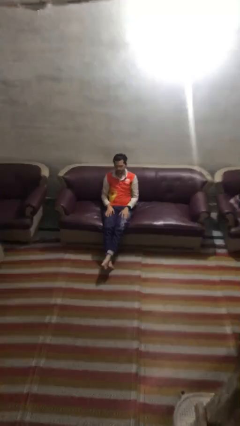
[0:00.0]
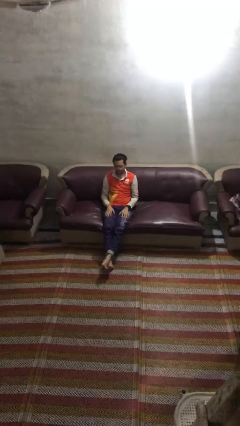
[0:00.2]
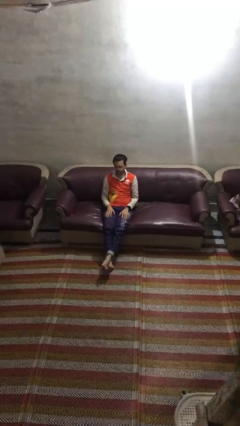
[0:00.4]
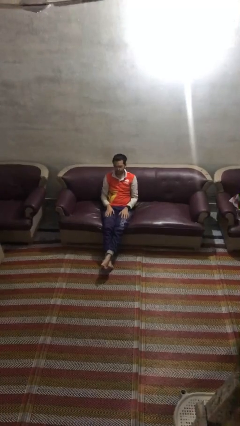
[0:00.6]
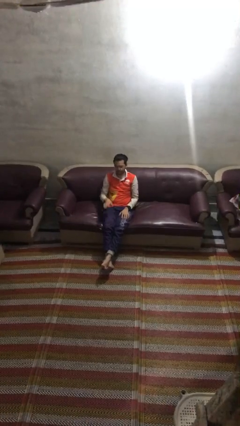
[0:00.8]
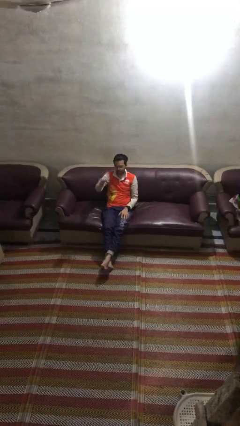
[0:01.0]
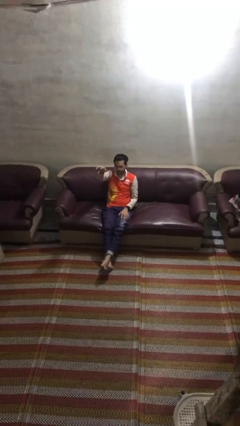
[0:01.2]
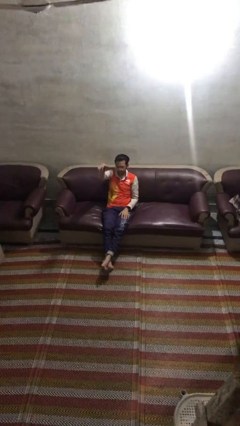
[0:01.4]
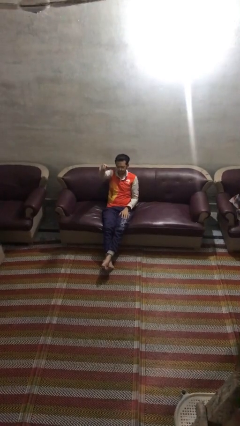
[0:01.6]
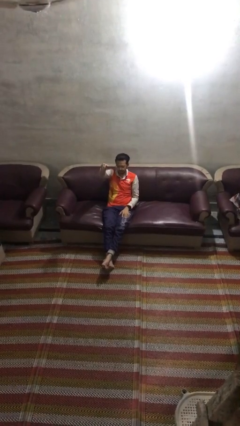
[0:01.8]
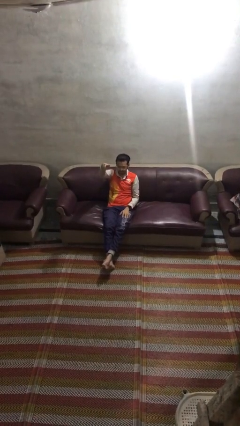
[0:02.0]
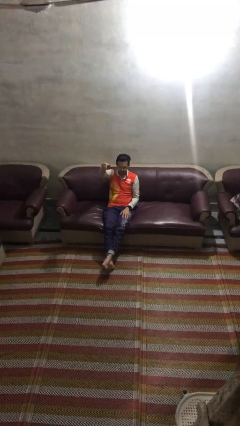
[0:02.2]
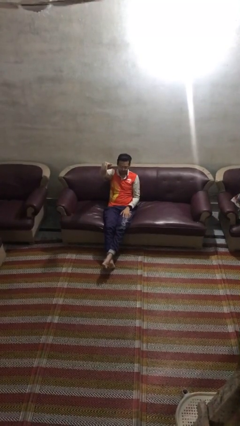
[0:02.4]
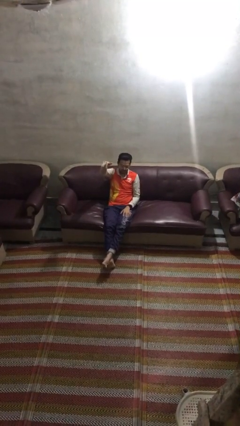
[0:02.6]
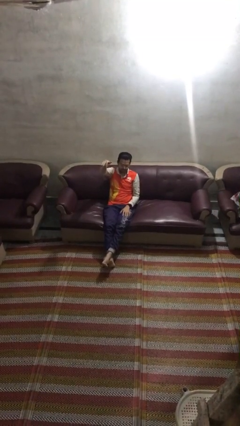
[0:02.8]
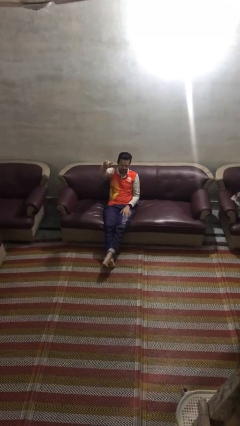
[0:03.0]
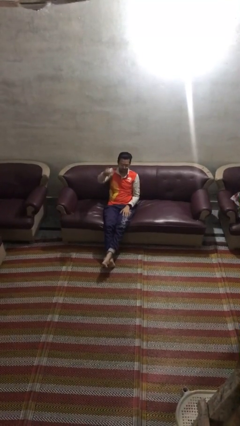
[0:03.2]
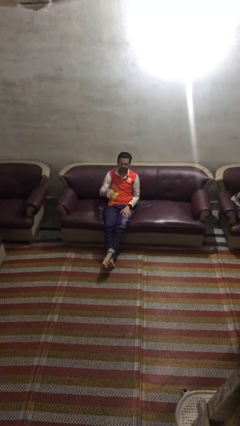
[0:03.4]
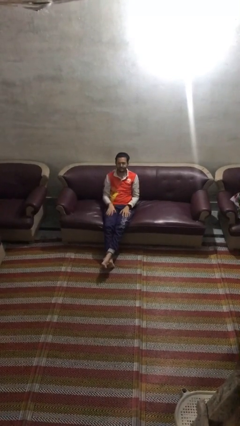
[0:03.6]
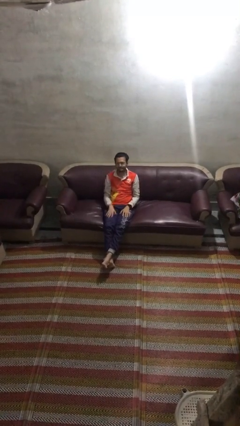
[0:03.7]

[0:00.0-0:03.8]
person gestures come here

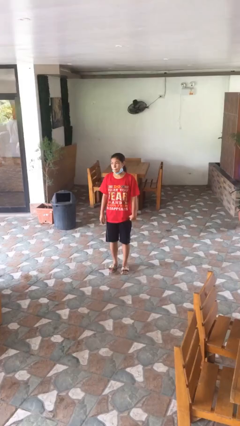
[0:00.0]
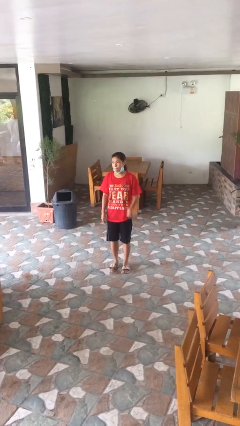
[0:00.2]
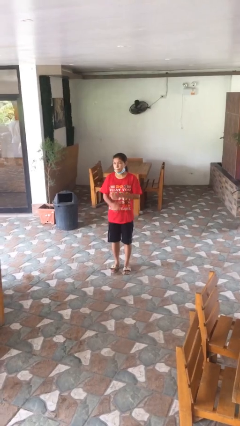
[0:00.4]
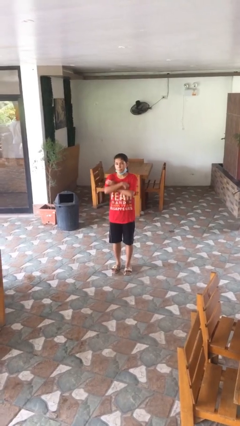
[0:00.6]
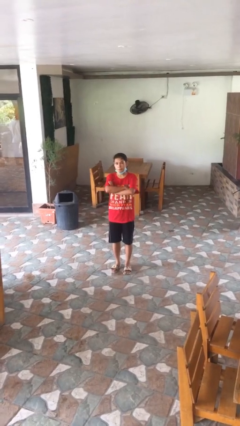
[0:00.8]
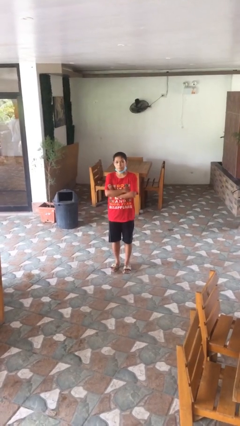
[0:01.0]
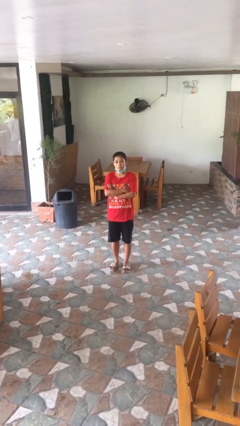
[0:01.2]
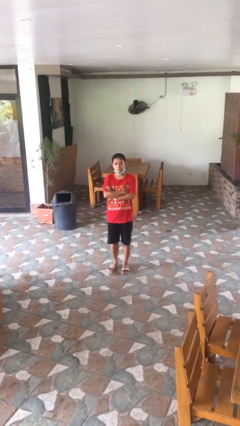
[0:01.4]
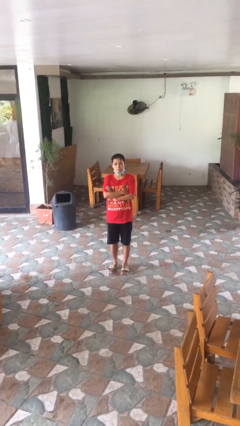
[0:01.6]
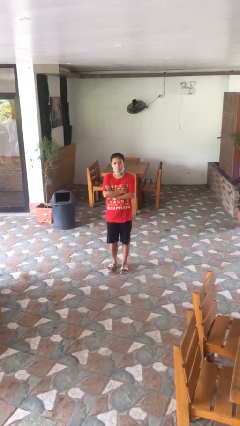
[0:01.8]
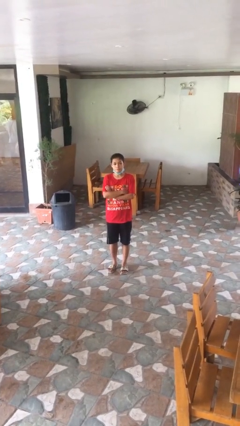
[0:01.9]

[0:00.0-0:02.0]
person crosses arms

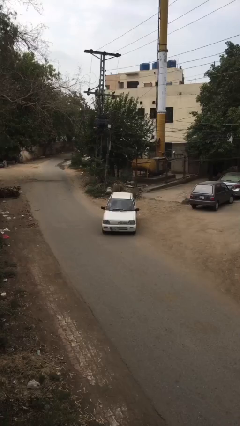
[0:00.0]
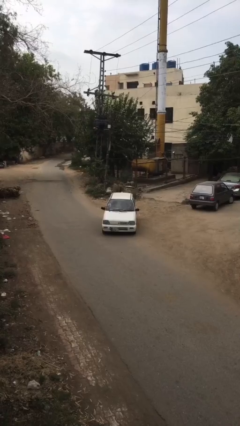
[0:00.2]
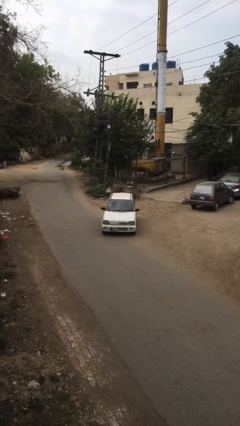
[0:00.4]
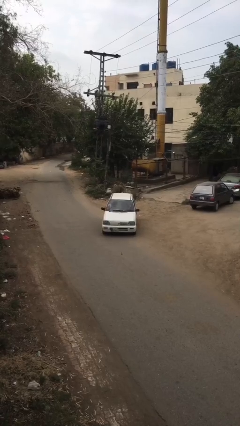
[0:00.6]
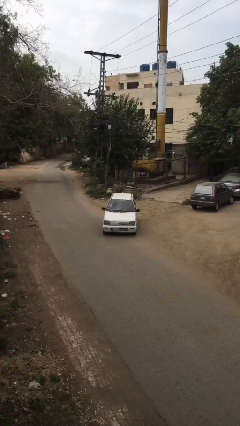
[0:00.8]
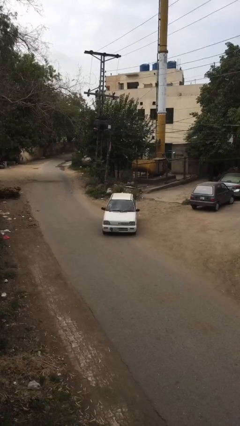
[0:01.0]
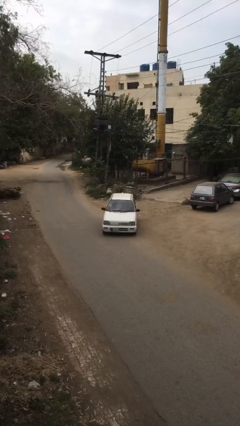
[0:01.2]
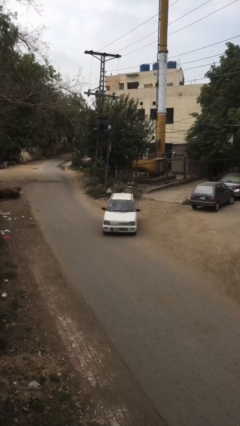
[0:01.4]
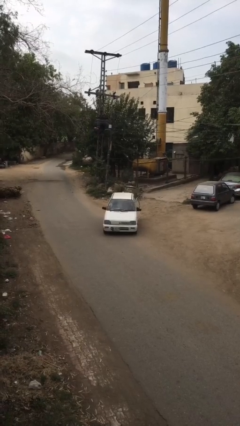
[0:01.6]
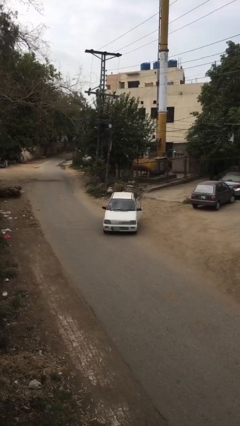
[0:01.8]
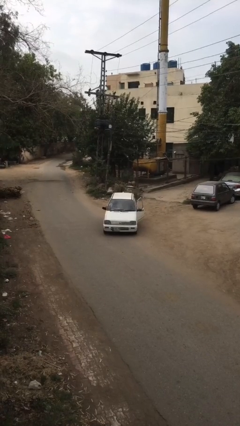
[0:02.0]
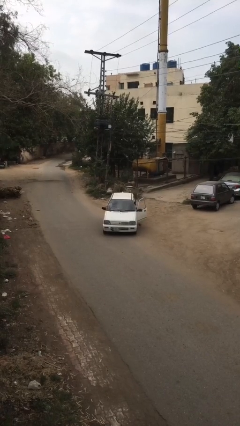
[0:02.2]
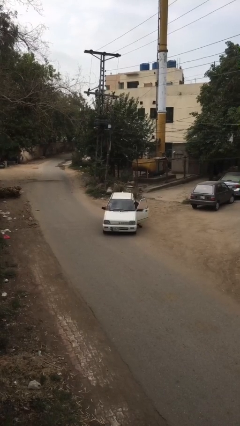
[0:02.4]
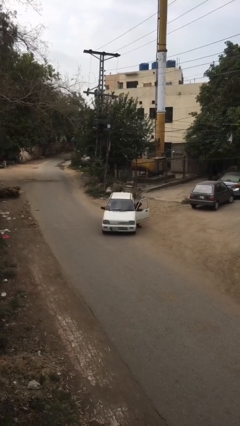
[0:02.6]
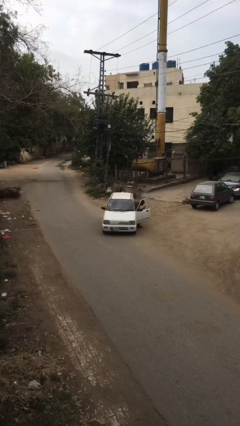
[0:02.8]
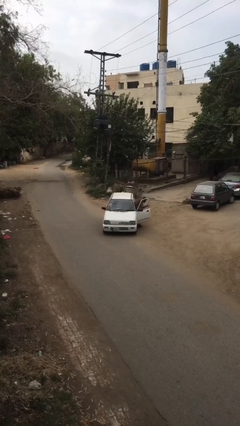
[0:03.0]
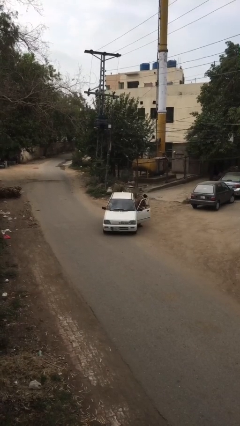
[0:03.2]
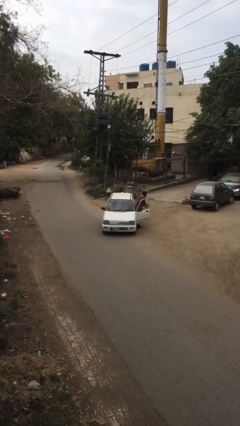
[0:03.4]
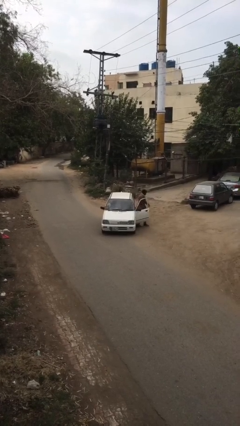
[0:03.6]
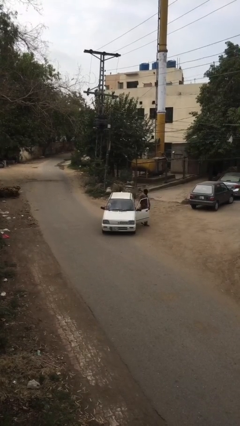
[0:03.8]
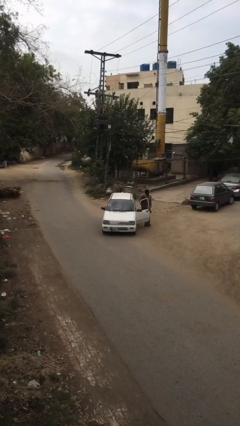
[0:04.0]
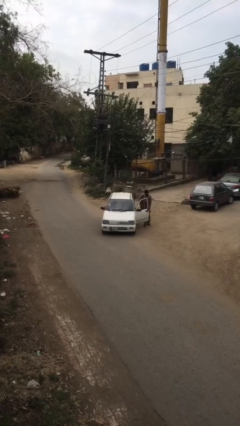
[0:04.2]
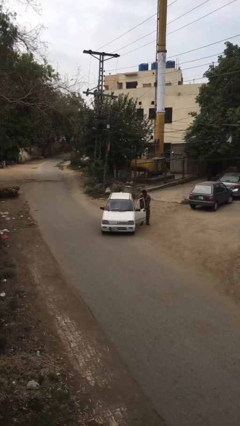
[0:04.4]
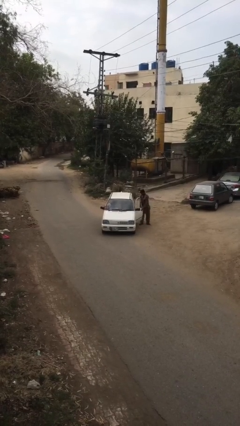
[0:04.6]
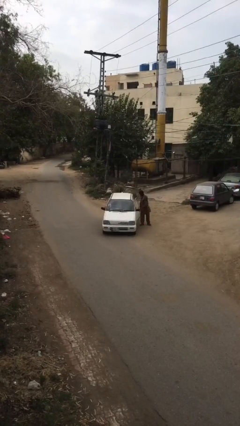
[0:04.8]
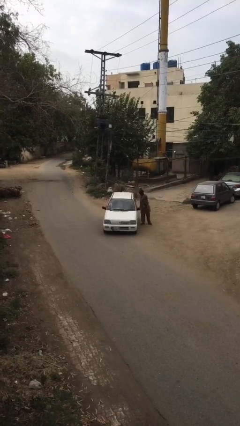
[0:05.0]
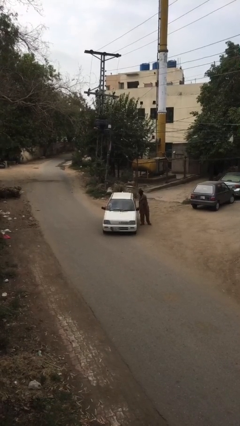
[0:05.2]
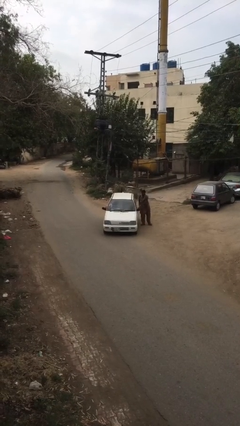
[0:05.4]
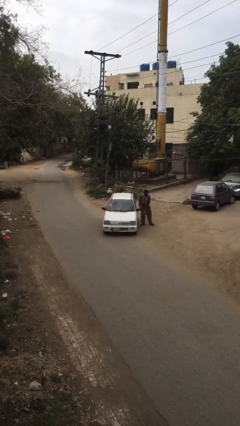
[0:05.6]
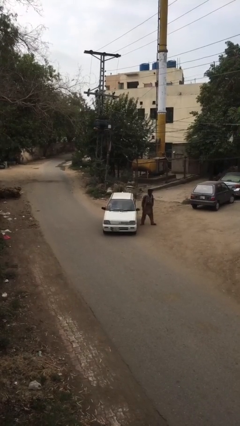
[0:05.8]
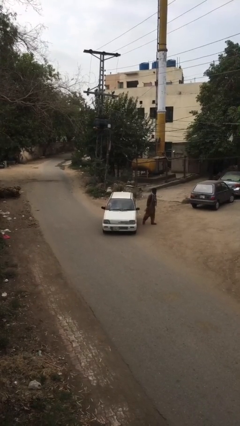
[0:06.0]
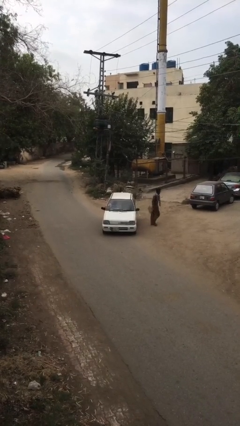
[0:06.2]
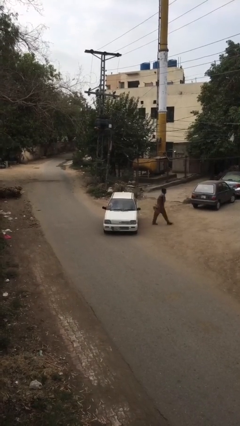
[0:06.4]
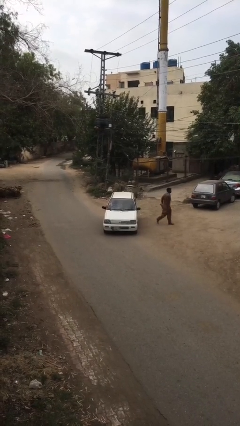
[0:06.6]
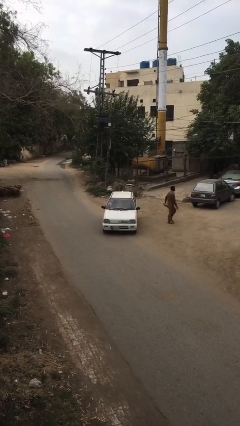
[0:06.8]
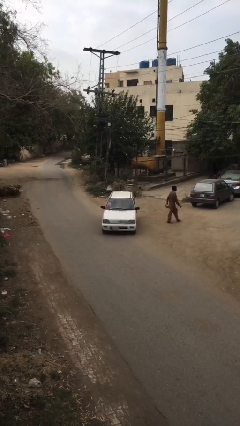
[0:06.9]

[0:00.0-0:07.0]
car drops off person

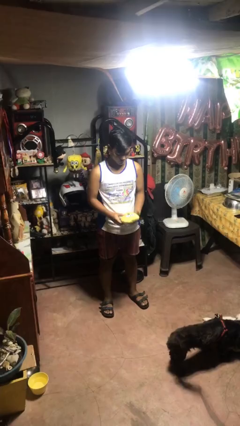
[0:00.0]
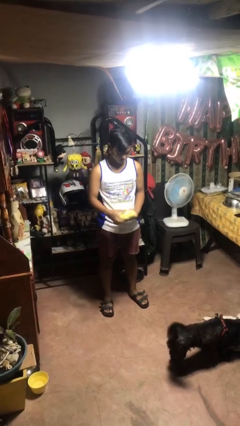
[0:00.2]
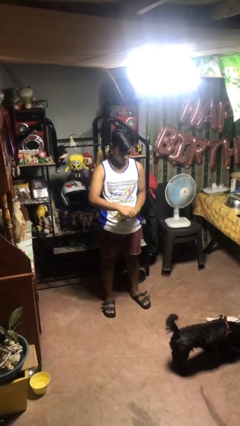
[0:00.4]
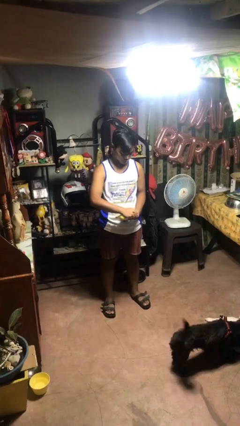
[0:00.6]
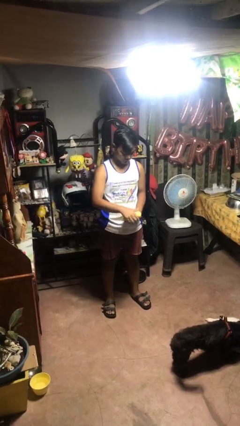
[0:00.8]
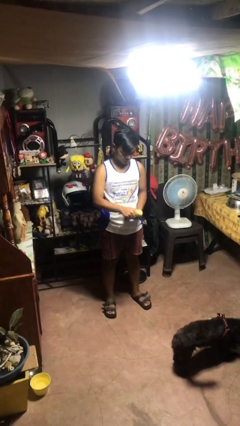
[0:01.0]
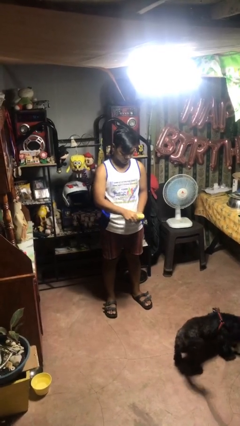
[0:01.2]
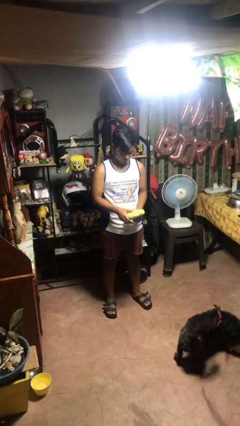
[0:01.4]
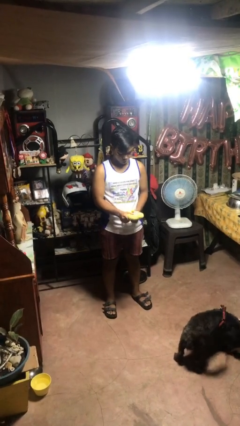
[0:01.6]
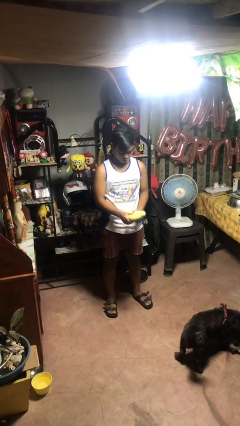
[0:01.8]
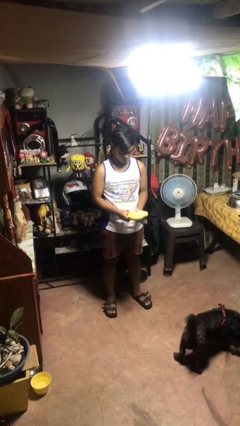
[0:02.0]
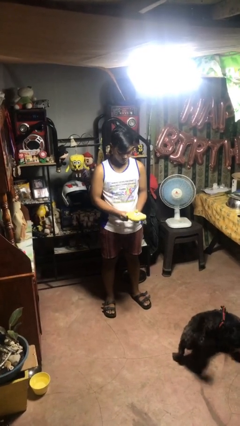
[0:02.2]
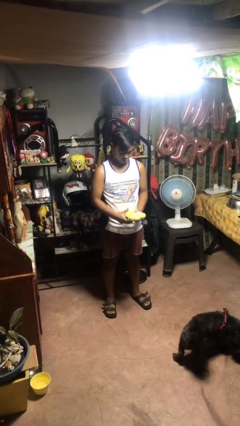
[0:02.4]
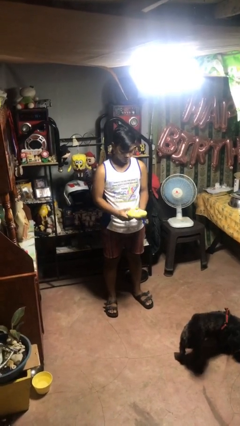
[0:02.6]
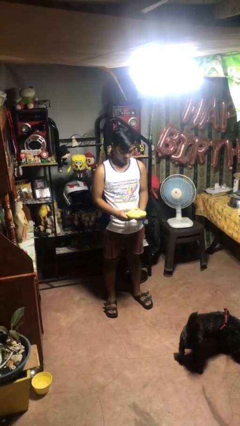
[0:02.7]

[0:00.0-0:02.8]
person squeezes object

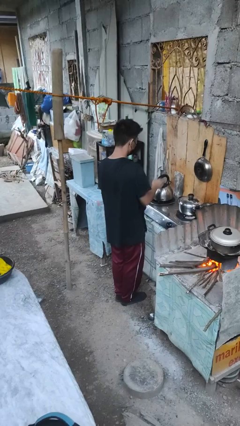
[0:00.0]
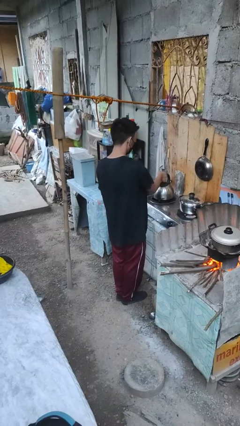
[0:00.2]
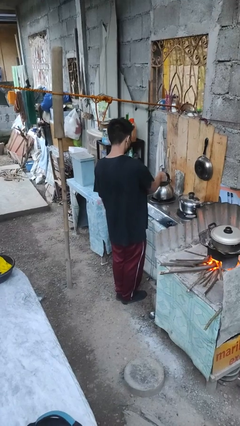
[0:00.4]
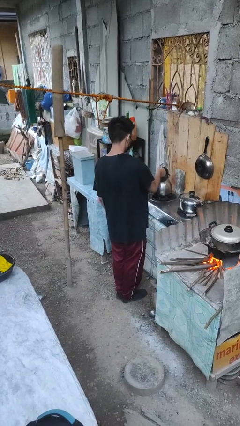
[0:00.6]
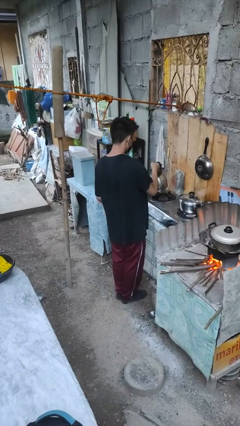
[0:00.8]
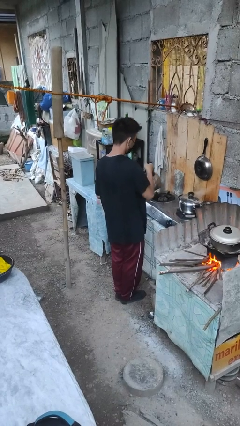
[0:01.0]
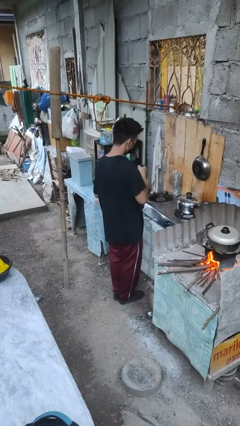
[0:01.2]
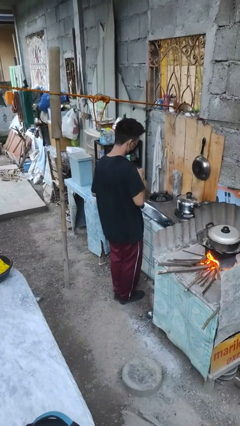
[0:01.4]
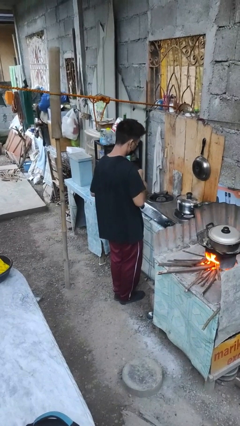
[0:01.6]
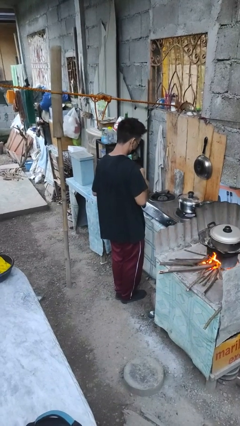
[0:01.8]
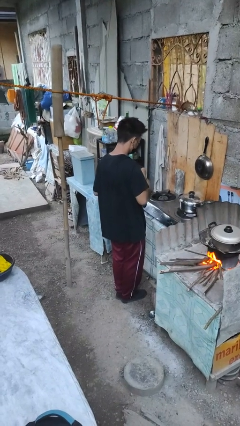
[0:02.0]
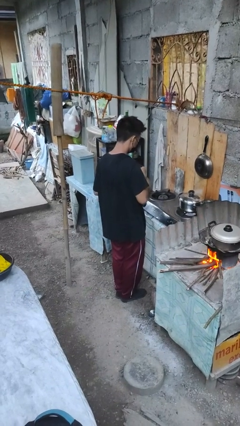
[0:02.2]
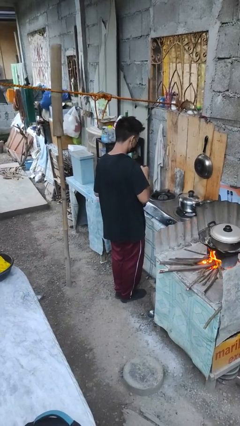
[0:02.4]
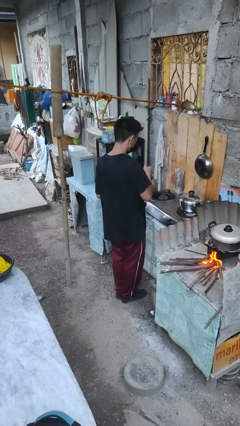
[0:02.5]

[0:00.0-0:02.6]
person picks up object from countertop
